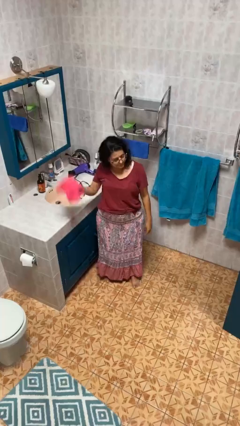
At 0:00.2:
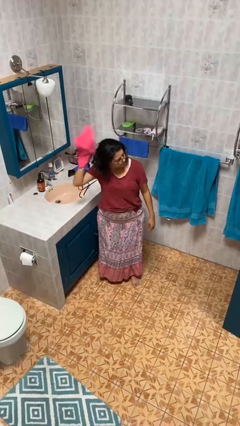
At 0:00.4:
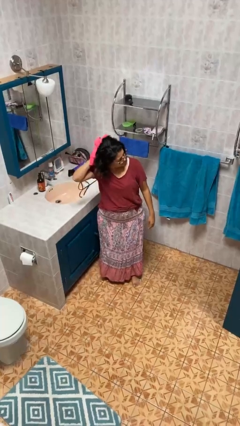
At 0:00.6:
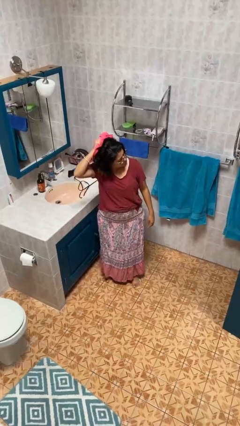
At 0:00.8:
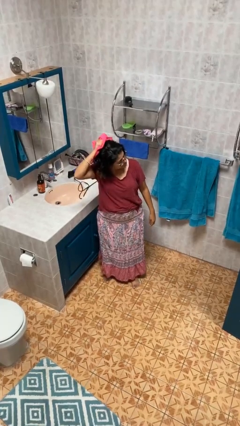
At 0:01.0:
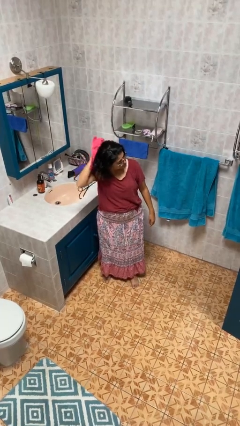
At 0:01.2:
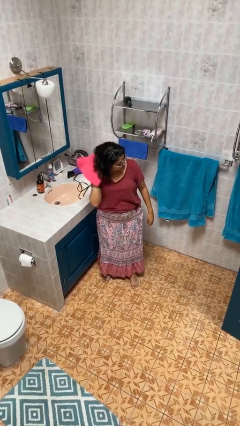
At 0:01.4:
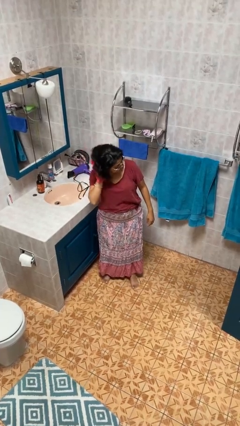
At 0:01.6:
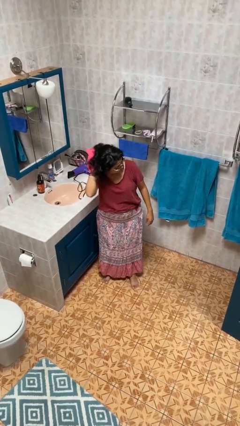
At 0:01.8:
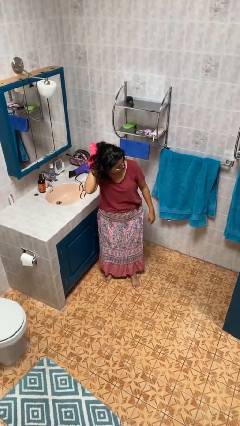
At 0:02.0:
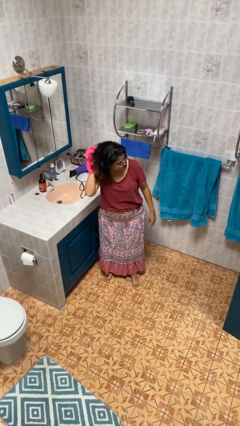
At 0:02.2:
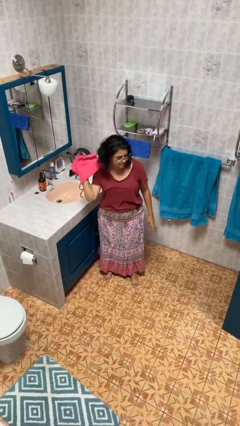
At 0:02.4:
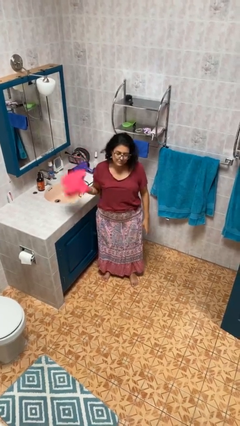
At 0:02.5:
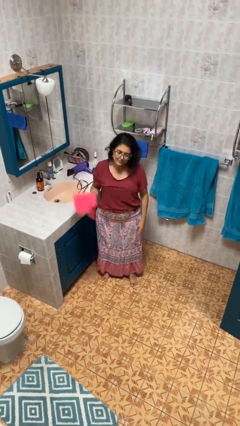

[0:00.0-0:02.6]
person dries hair with towel

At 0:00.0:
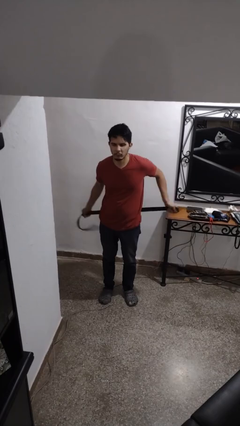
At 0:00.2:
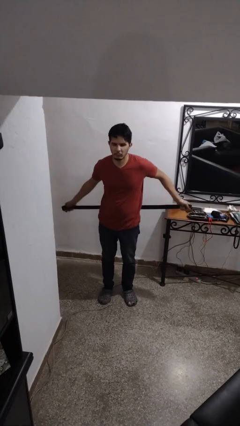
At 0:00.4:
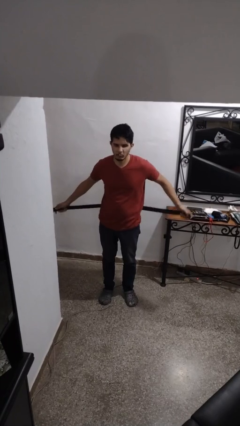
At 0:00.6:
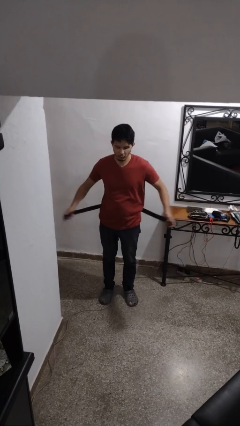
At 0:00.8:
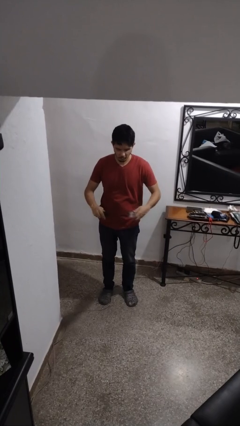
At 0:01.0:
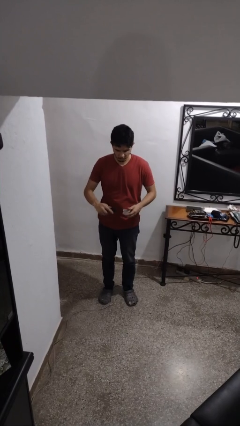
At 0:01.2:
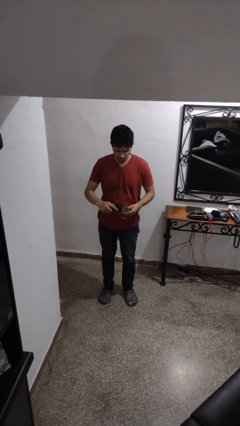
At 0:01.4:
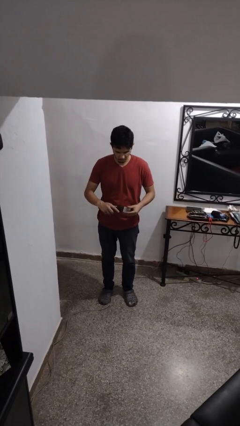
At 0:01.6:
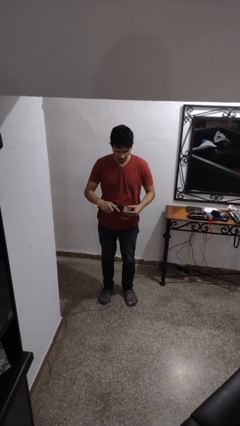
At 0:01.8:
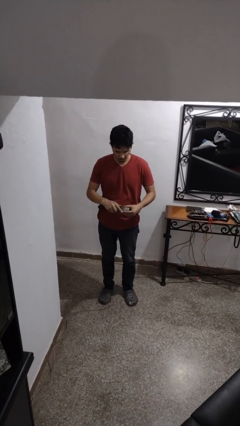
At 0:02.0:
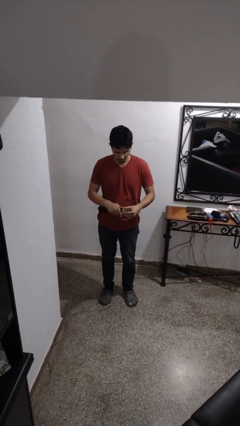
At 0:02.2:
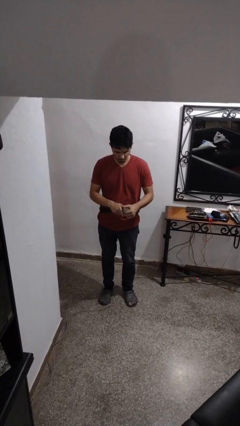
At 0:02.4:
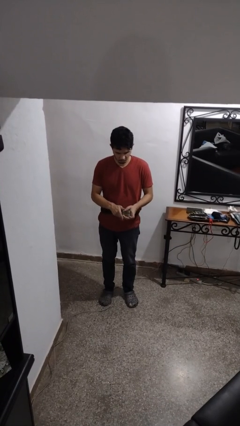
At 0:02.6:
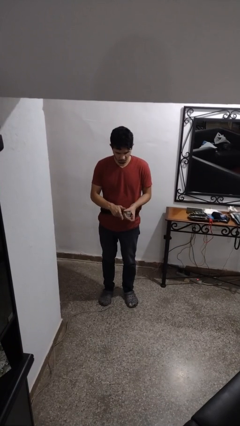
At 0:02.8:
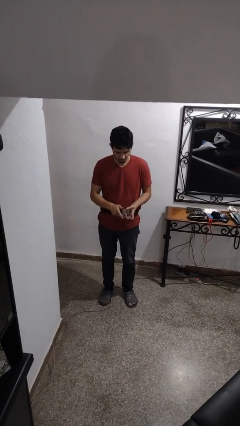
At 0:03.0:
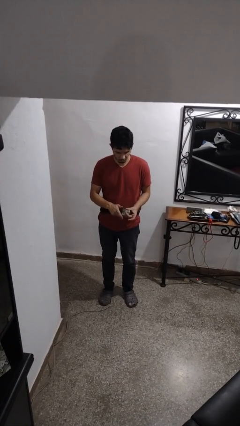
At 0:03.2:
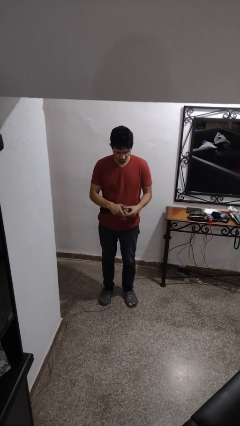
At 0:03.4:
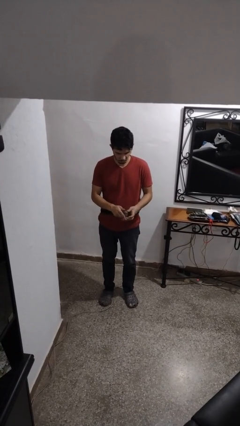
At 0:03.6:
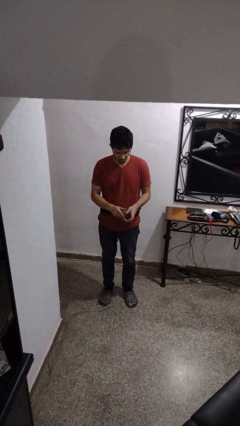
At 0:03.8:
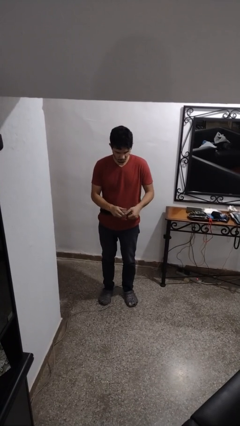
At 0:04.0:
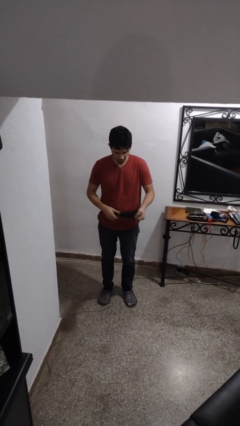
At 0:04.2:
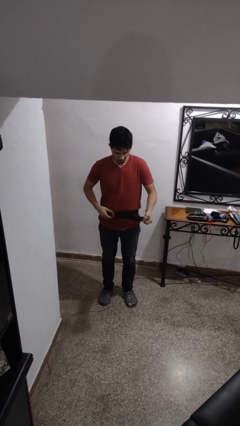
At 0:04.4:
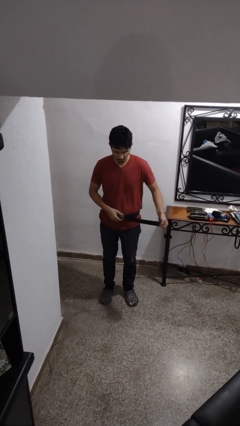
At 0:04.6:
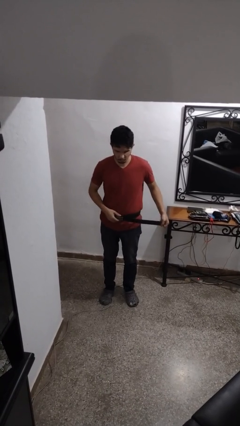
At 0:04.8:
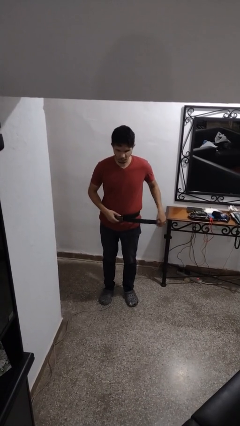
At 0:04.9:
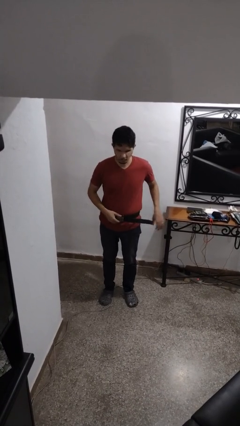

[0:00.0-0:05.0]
person puts on belt

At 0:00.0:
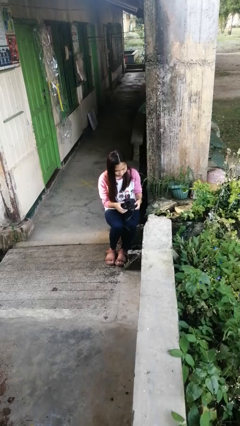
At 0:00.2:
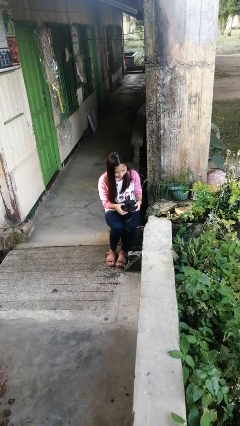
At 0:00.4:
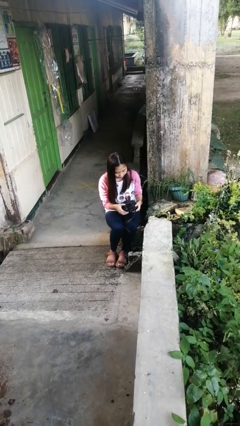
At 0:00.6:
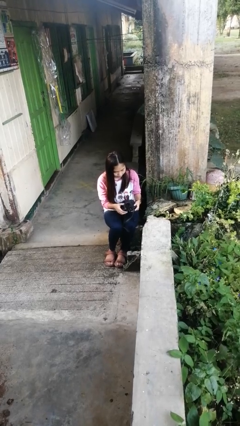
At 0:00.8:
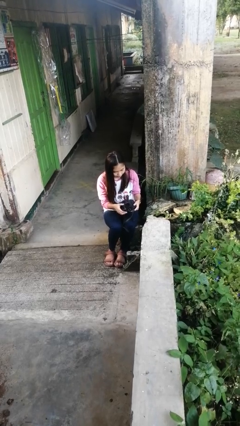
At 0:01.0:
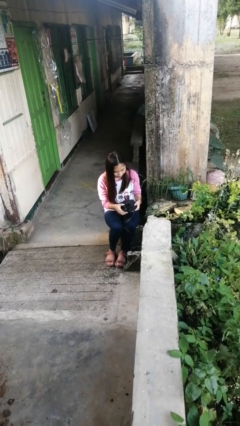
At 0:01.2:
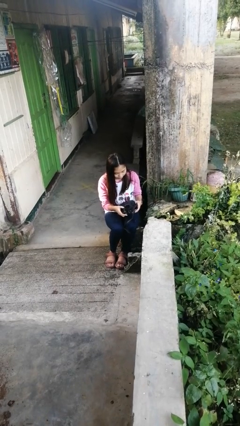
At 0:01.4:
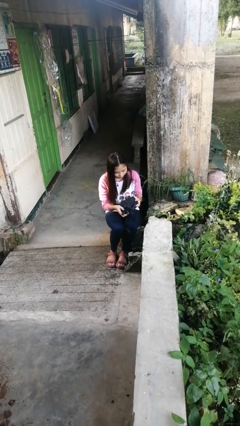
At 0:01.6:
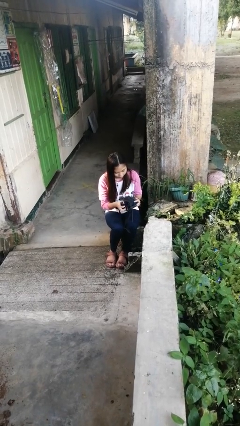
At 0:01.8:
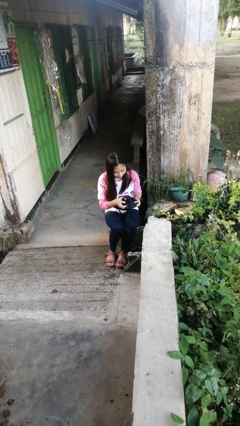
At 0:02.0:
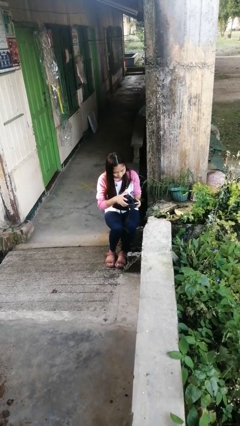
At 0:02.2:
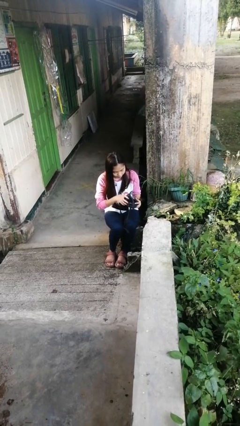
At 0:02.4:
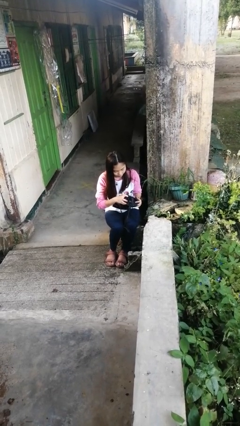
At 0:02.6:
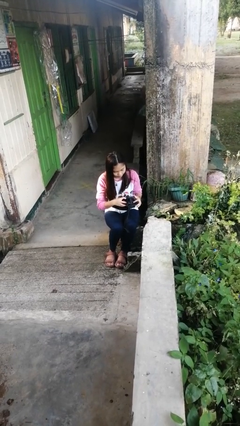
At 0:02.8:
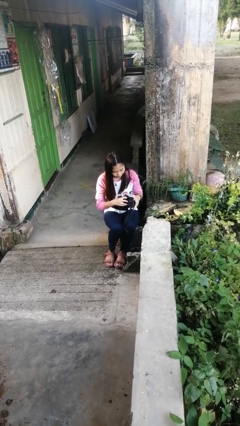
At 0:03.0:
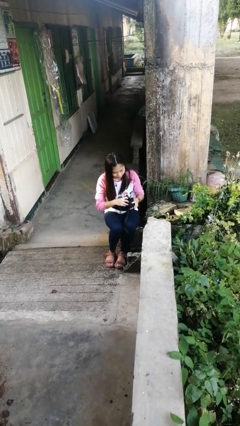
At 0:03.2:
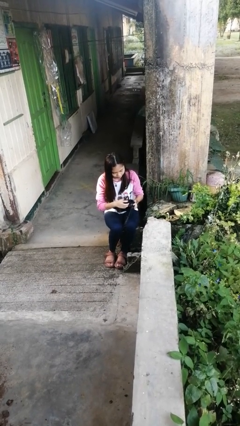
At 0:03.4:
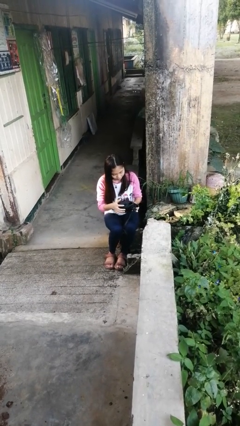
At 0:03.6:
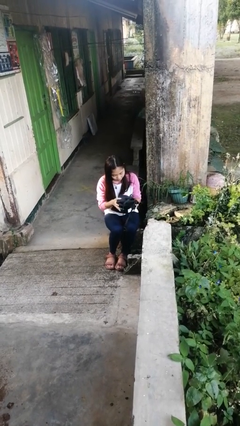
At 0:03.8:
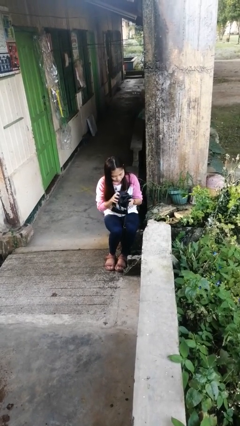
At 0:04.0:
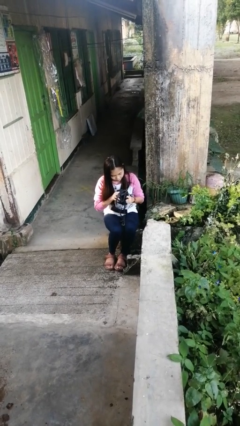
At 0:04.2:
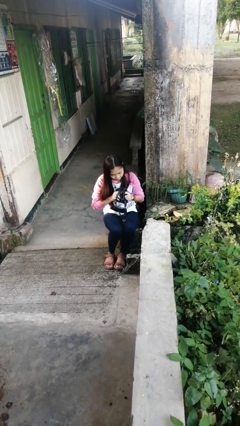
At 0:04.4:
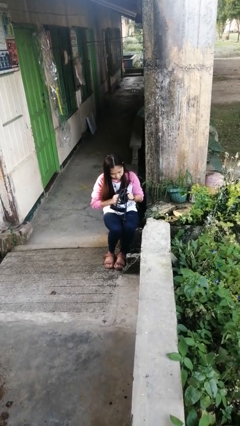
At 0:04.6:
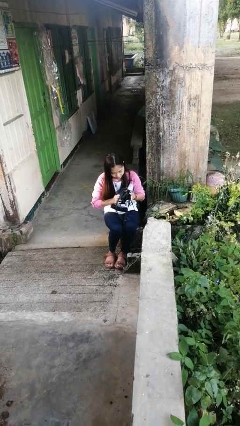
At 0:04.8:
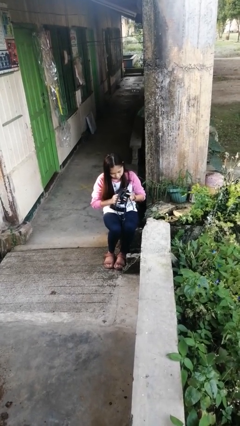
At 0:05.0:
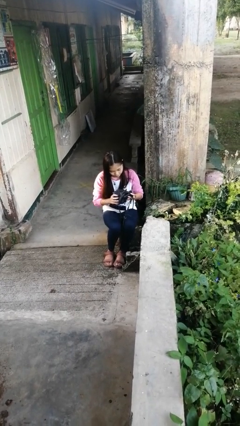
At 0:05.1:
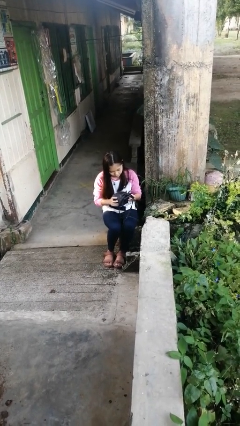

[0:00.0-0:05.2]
person squeezes object

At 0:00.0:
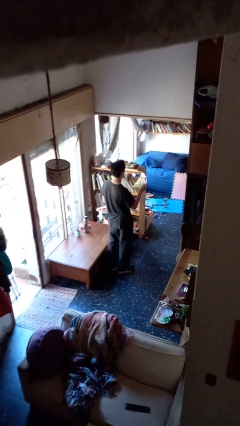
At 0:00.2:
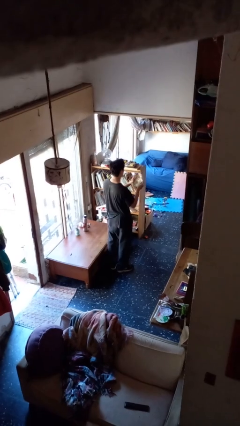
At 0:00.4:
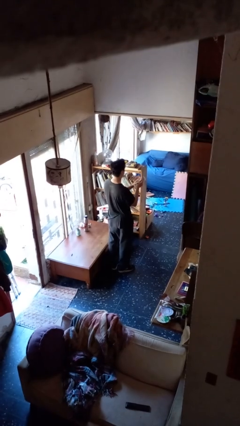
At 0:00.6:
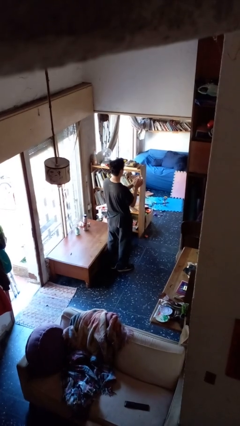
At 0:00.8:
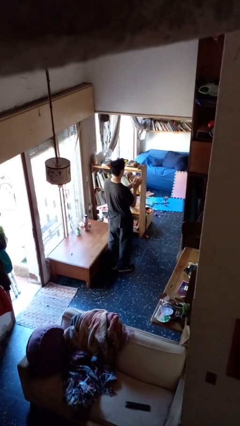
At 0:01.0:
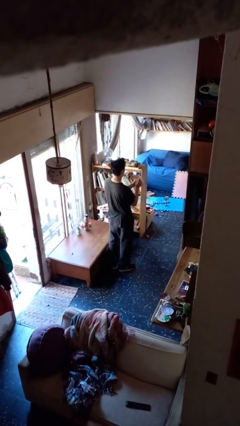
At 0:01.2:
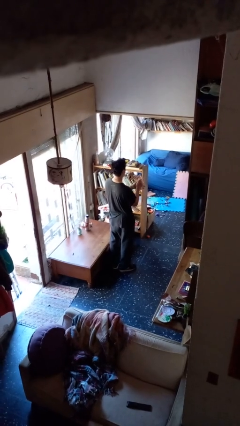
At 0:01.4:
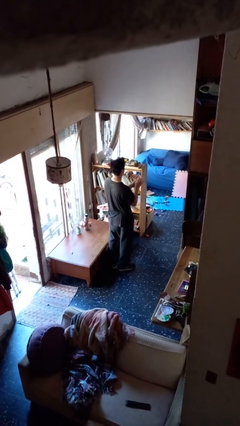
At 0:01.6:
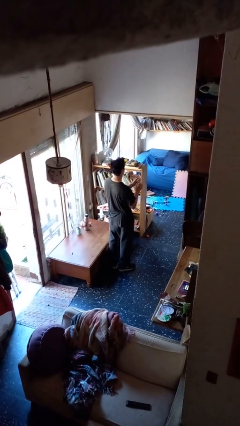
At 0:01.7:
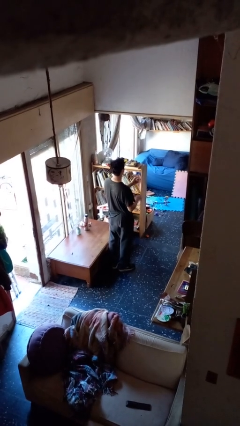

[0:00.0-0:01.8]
person crumples paper

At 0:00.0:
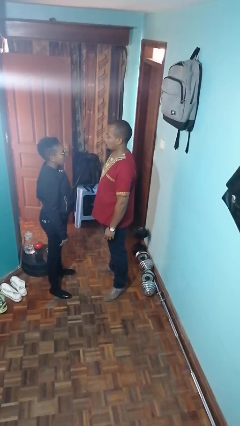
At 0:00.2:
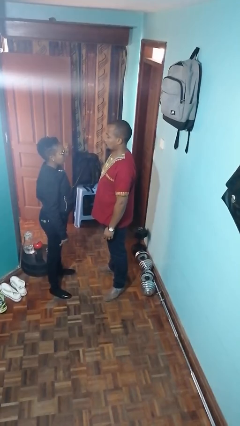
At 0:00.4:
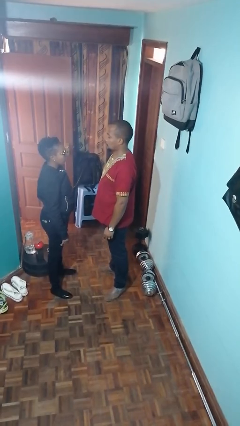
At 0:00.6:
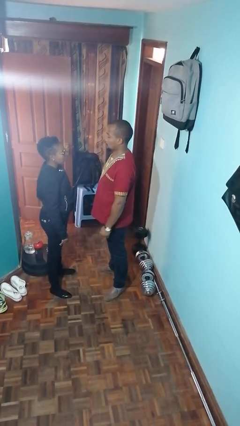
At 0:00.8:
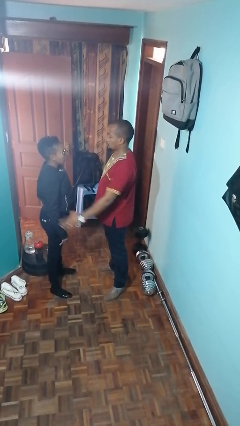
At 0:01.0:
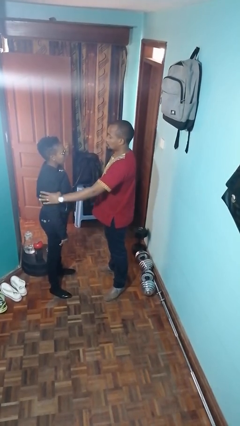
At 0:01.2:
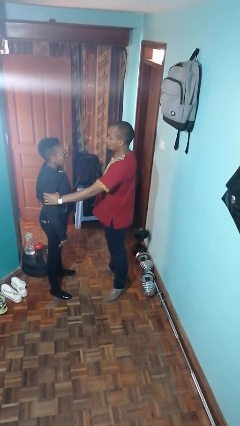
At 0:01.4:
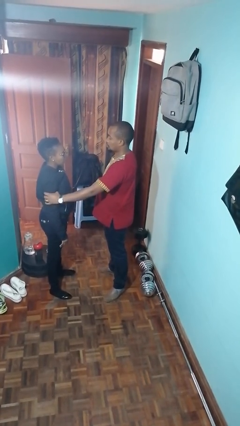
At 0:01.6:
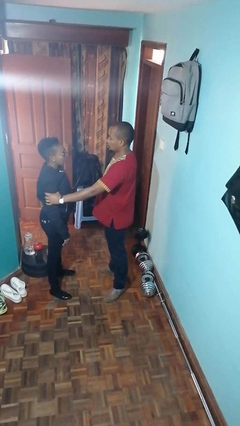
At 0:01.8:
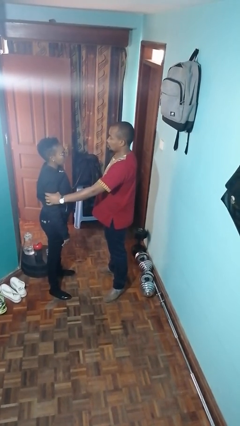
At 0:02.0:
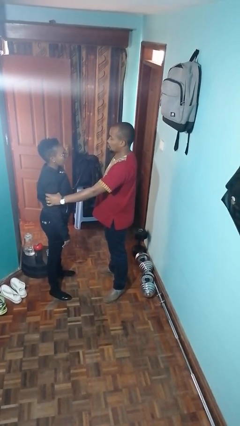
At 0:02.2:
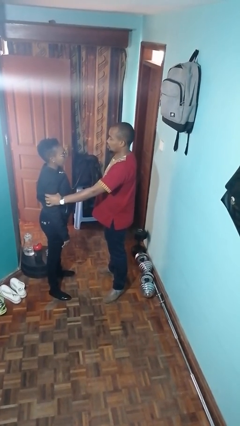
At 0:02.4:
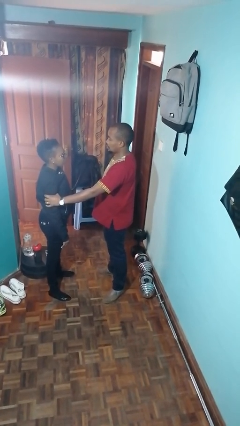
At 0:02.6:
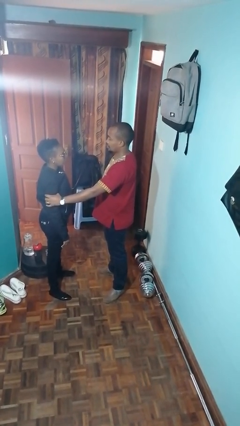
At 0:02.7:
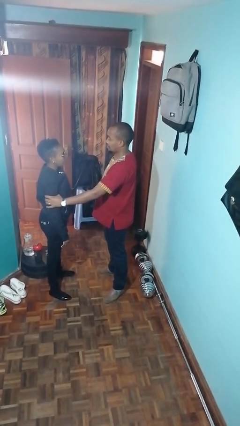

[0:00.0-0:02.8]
person grabs person by bicep
